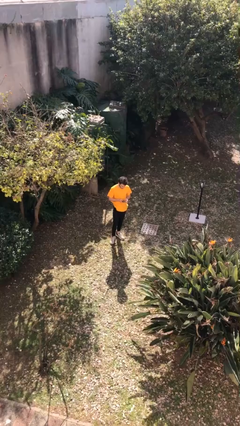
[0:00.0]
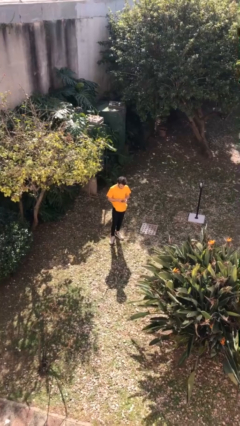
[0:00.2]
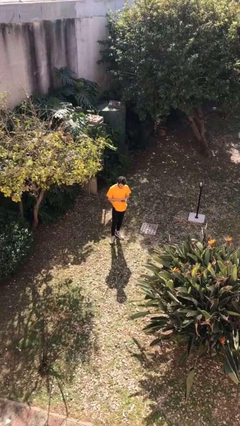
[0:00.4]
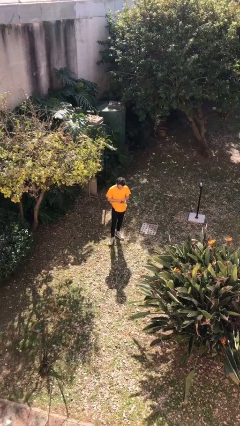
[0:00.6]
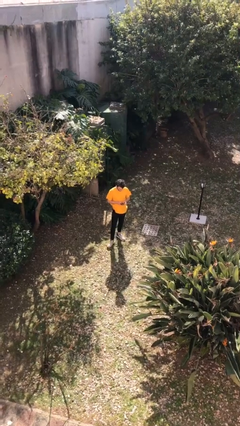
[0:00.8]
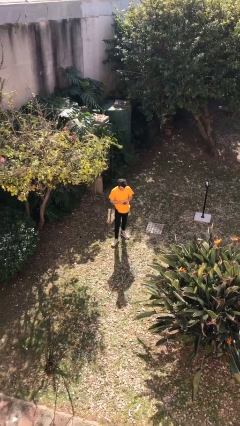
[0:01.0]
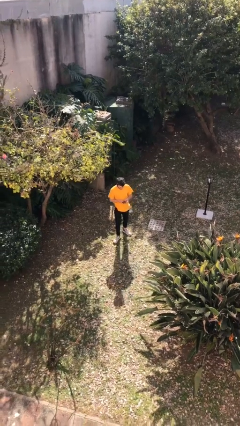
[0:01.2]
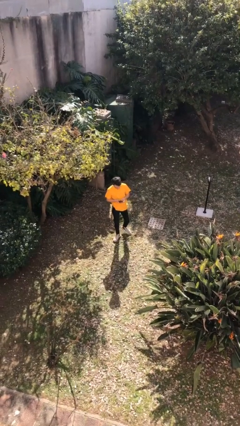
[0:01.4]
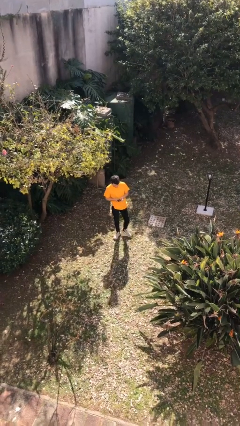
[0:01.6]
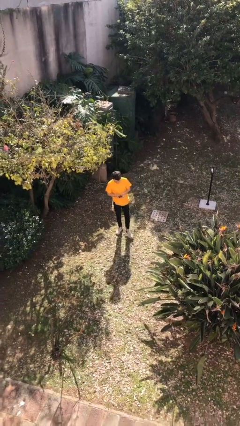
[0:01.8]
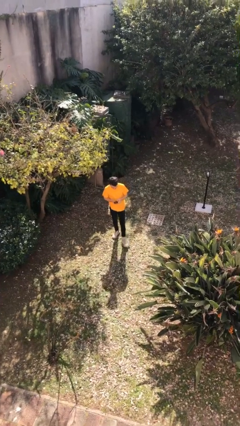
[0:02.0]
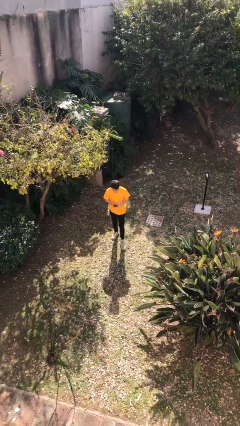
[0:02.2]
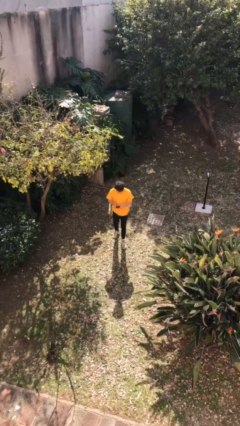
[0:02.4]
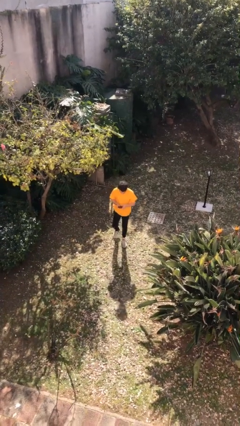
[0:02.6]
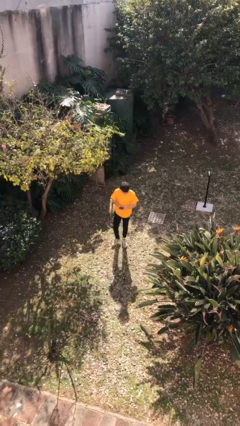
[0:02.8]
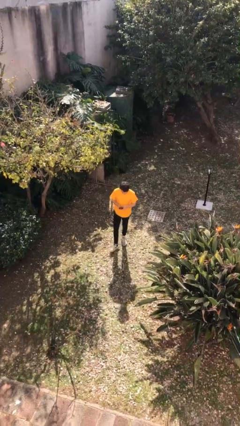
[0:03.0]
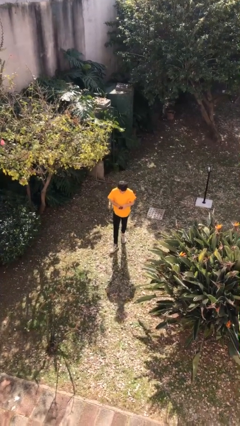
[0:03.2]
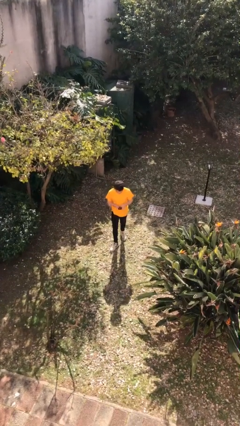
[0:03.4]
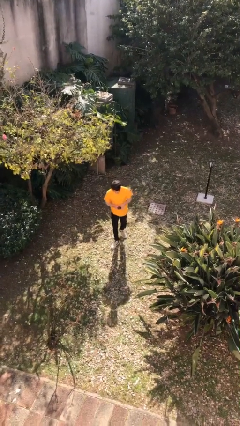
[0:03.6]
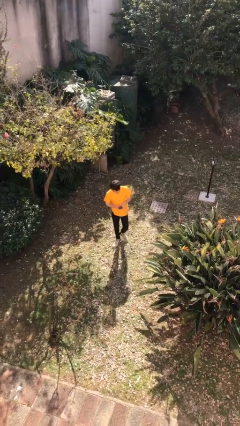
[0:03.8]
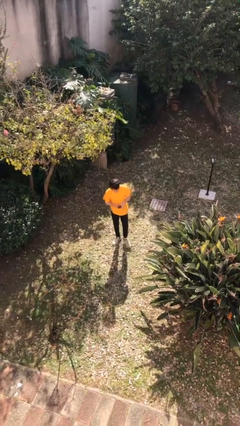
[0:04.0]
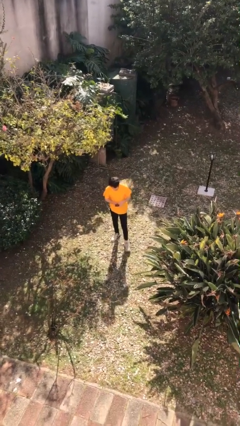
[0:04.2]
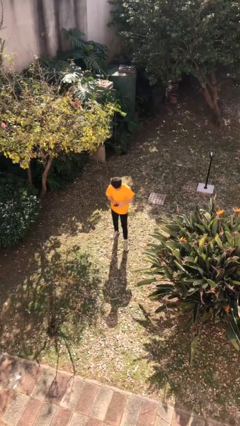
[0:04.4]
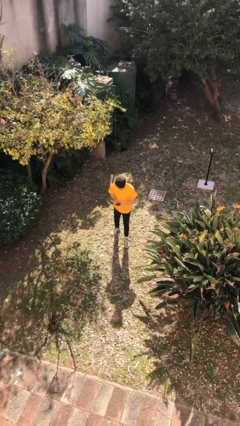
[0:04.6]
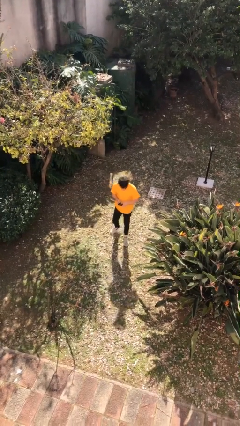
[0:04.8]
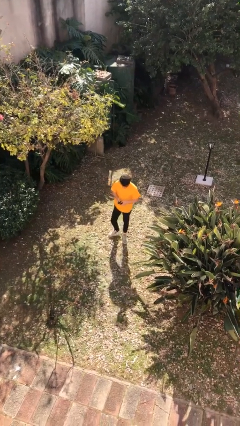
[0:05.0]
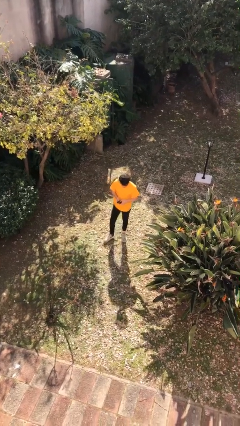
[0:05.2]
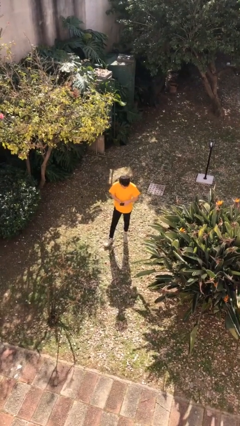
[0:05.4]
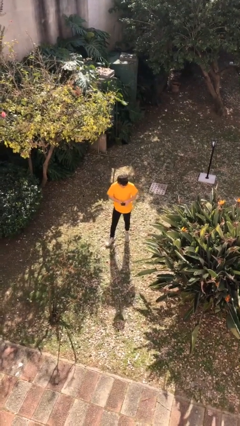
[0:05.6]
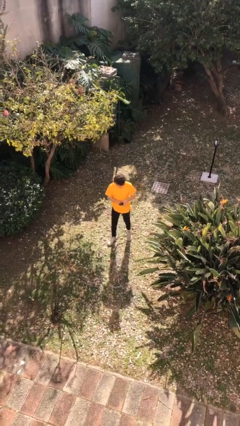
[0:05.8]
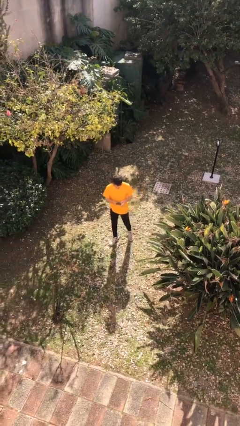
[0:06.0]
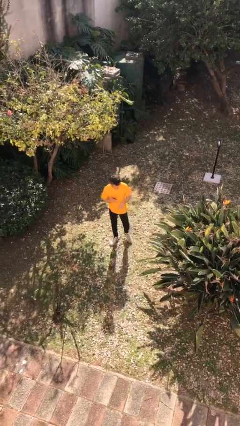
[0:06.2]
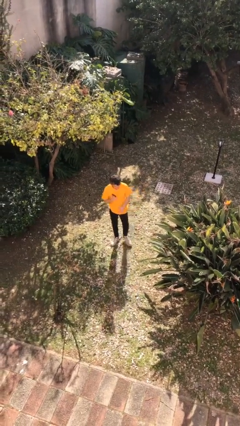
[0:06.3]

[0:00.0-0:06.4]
person texts on phone

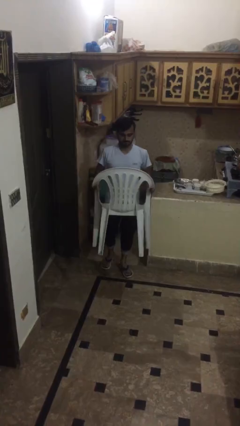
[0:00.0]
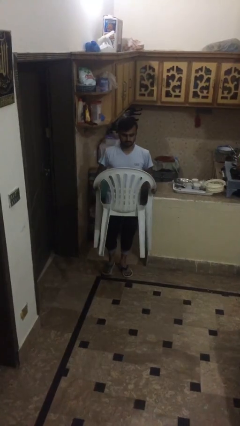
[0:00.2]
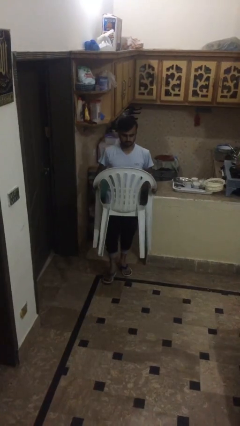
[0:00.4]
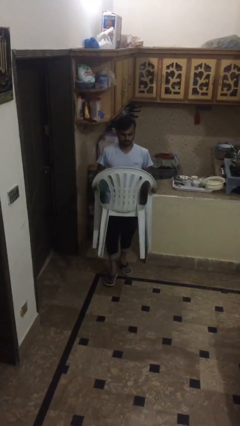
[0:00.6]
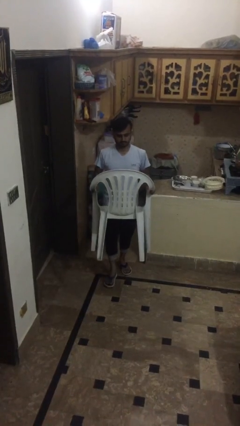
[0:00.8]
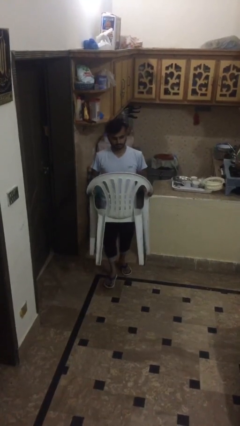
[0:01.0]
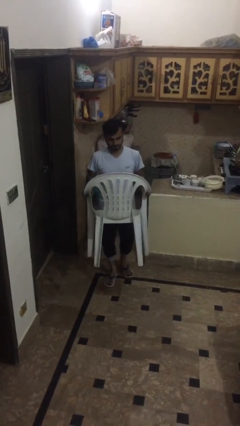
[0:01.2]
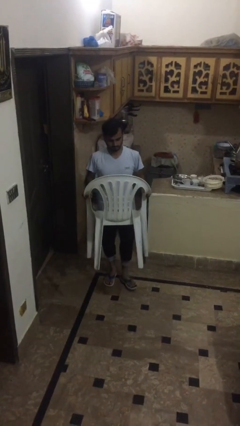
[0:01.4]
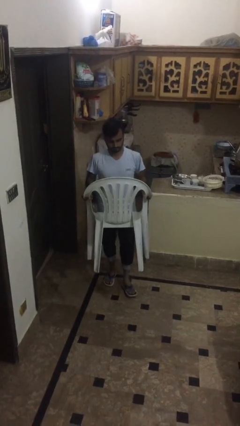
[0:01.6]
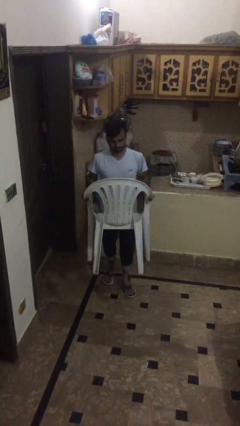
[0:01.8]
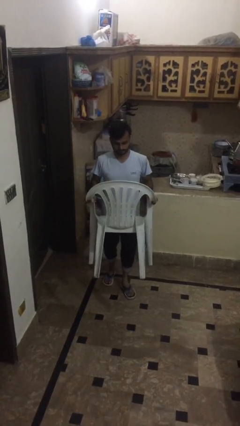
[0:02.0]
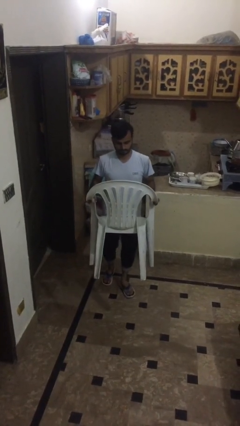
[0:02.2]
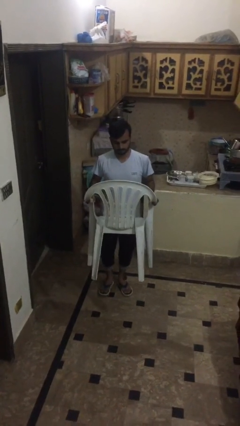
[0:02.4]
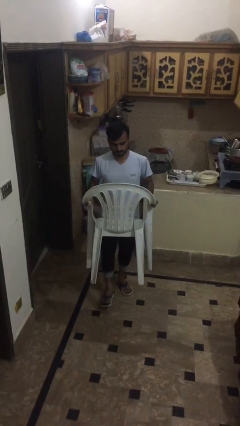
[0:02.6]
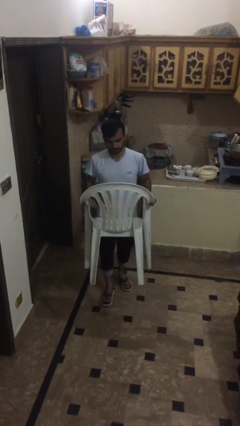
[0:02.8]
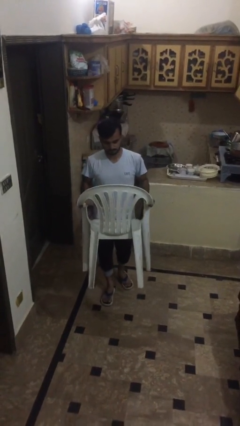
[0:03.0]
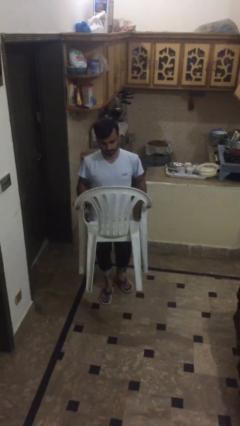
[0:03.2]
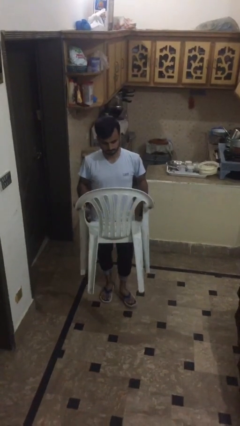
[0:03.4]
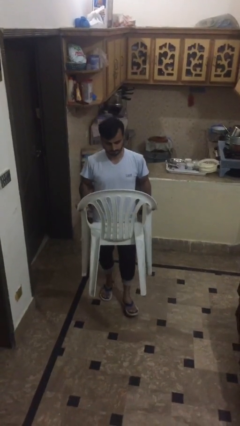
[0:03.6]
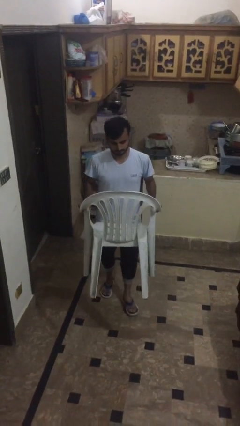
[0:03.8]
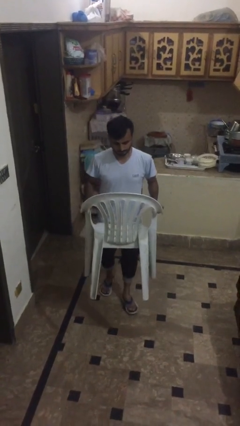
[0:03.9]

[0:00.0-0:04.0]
person carries heavy object

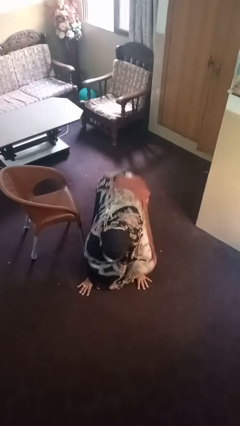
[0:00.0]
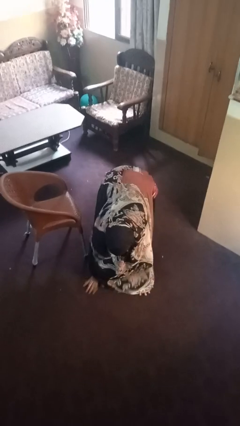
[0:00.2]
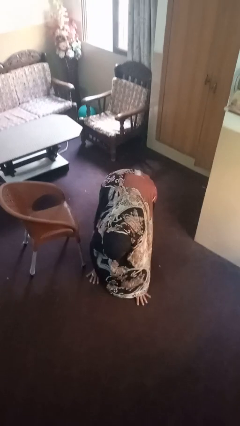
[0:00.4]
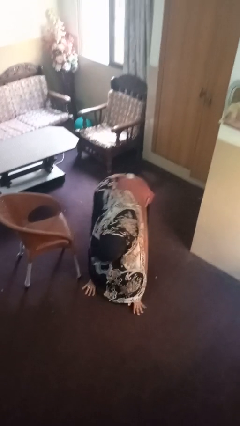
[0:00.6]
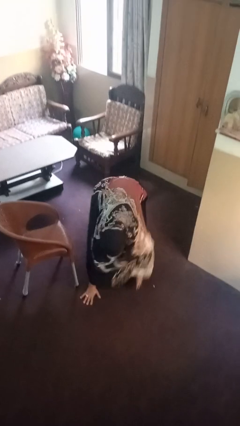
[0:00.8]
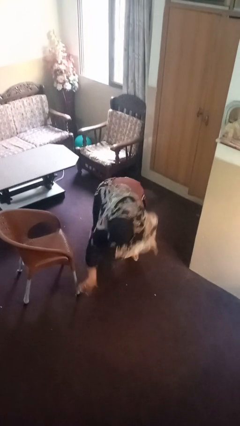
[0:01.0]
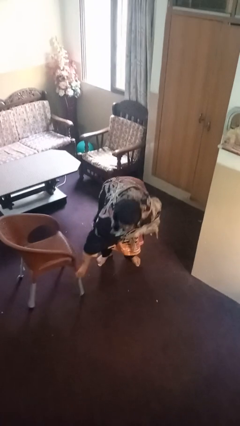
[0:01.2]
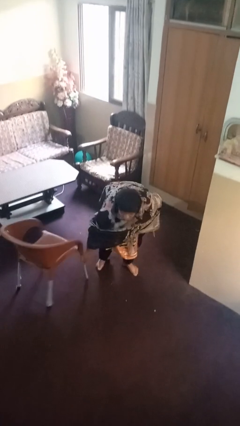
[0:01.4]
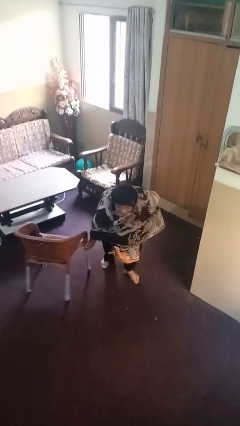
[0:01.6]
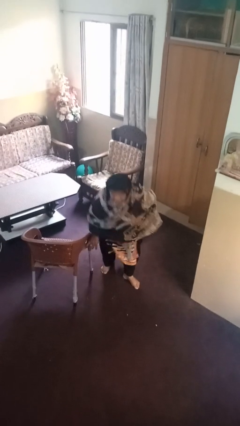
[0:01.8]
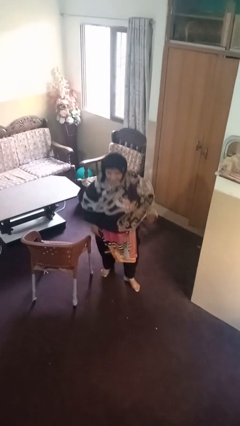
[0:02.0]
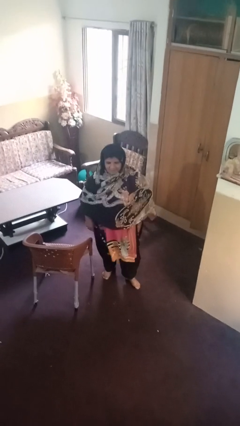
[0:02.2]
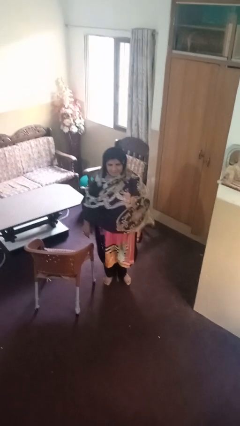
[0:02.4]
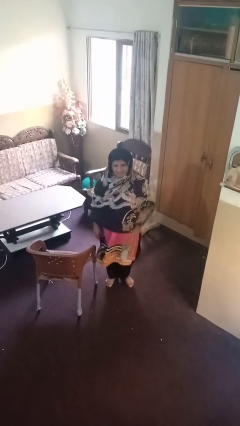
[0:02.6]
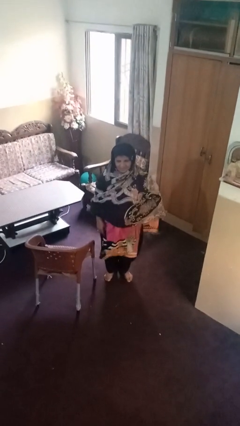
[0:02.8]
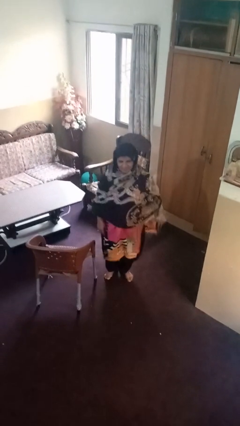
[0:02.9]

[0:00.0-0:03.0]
person stands up from floor

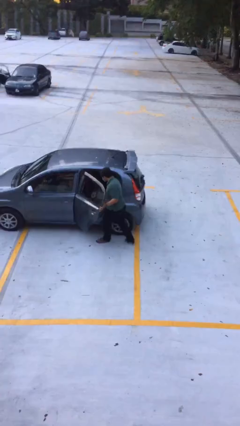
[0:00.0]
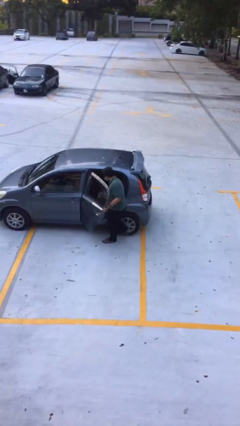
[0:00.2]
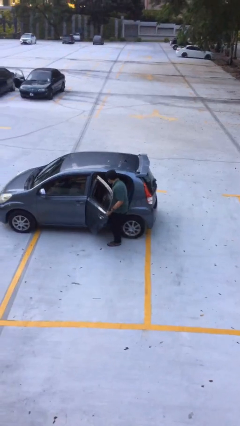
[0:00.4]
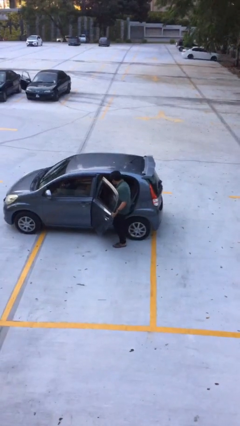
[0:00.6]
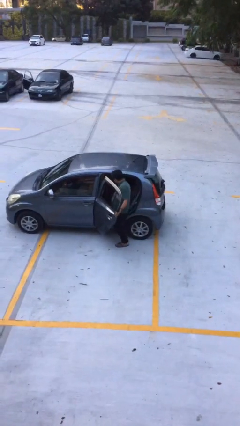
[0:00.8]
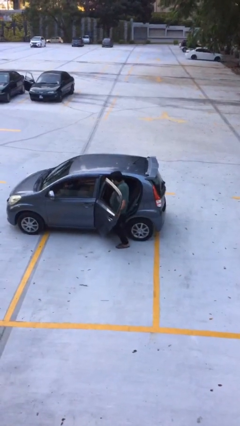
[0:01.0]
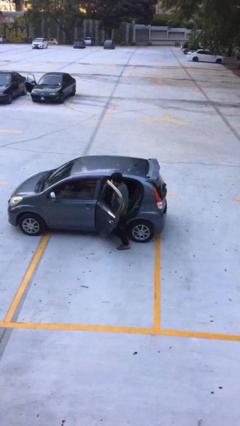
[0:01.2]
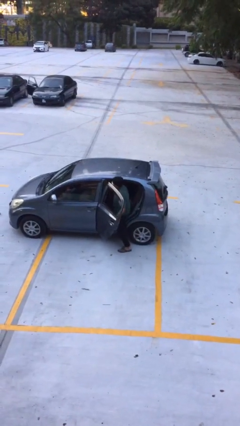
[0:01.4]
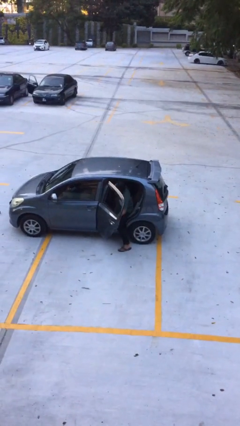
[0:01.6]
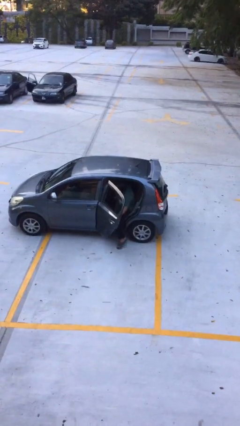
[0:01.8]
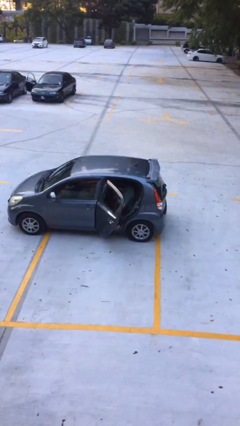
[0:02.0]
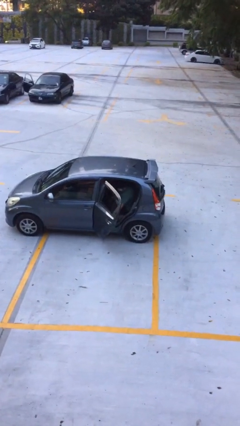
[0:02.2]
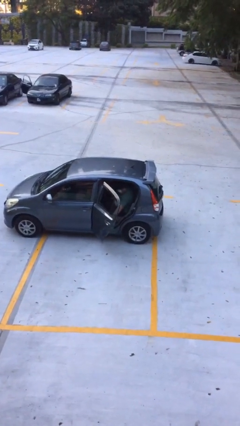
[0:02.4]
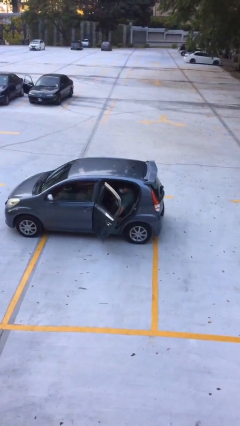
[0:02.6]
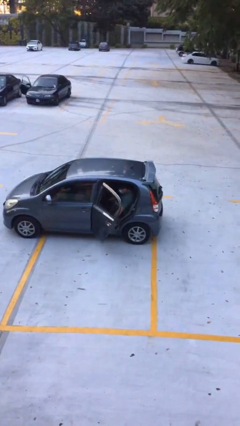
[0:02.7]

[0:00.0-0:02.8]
person enters car

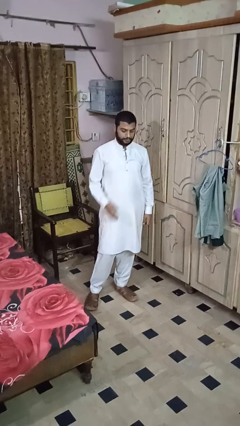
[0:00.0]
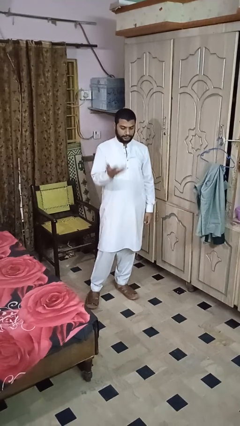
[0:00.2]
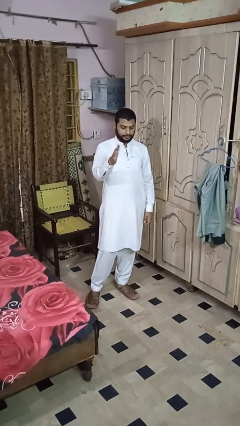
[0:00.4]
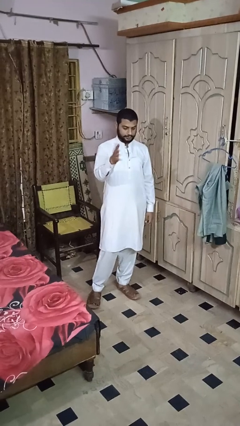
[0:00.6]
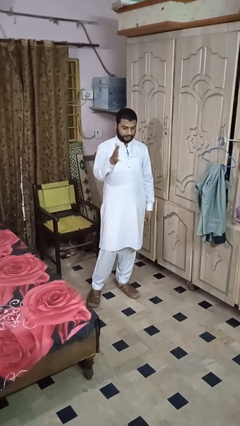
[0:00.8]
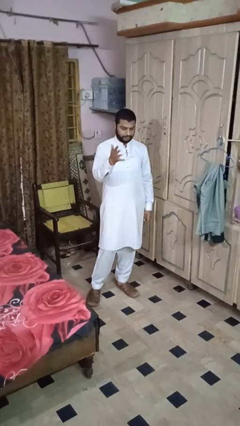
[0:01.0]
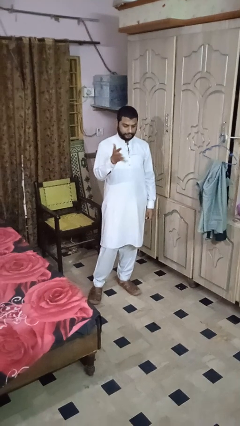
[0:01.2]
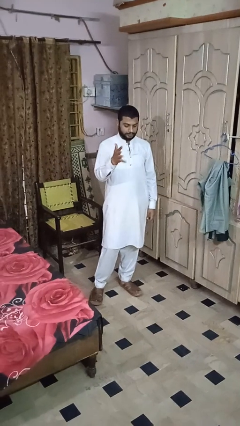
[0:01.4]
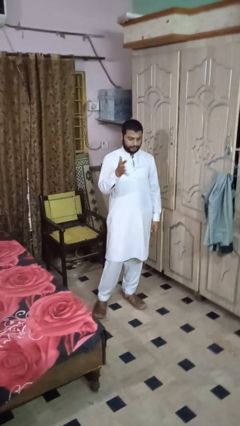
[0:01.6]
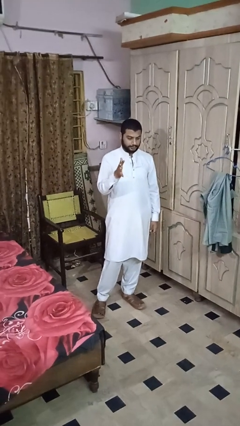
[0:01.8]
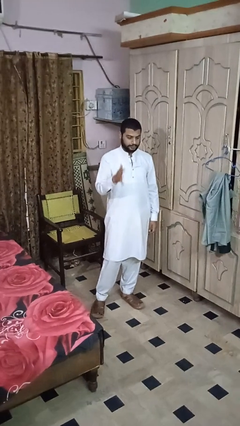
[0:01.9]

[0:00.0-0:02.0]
person shakes head
